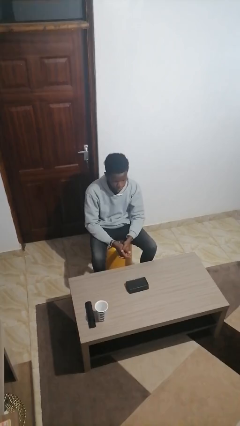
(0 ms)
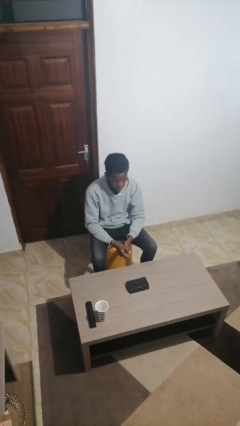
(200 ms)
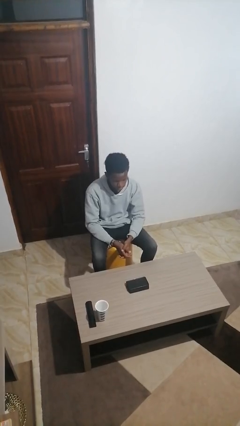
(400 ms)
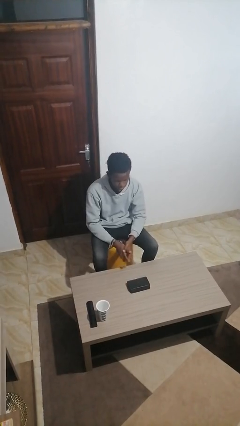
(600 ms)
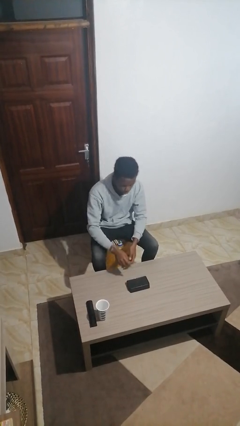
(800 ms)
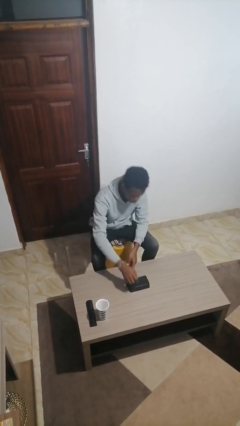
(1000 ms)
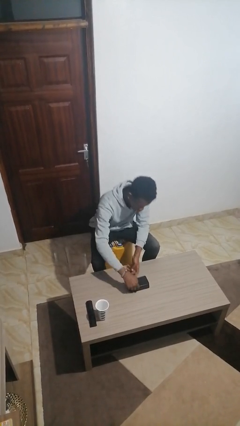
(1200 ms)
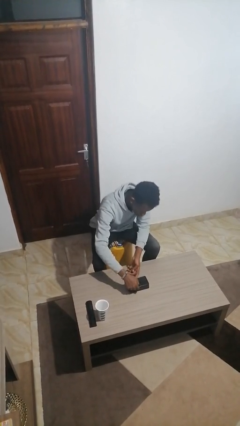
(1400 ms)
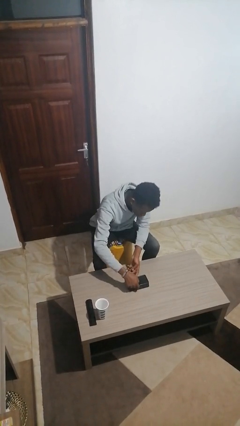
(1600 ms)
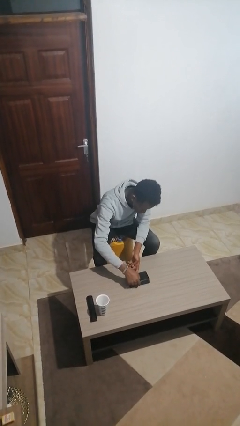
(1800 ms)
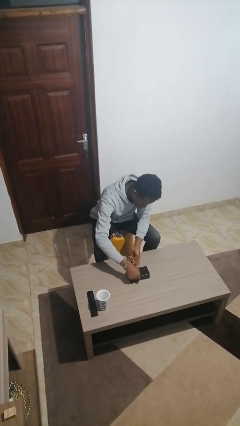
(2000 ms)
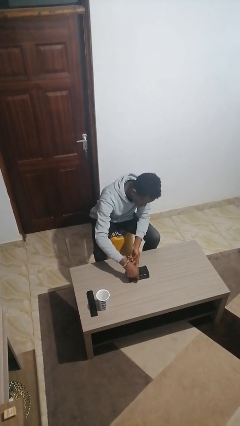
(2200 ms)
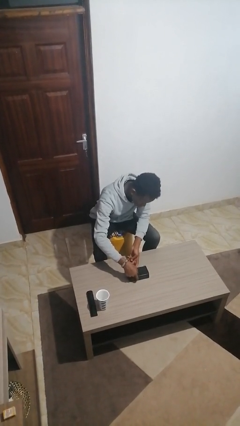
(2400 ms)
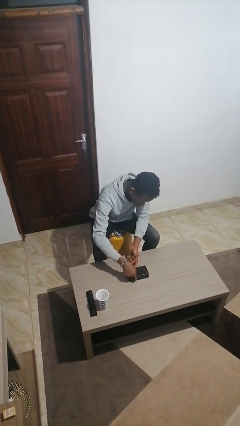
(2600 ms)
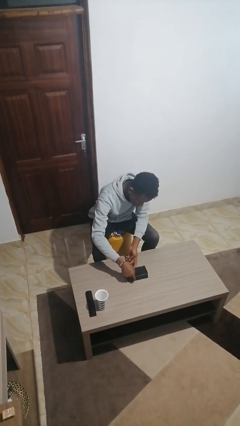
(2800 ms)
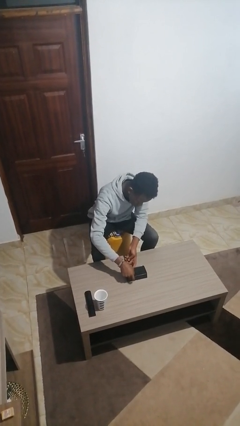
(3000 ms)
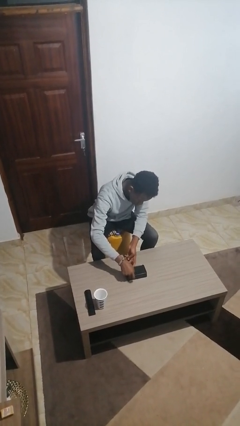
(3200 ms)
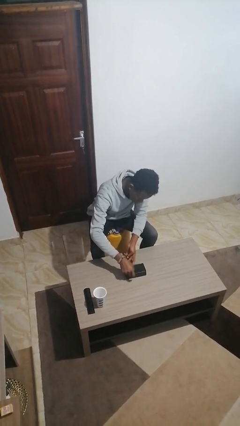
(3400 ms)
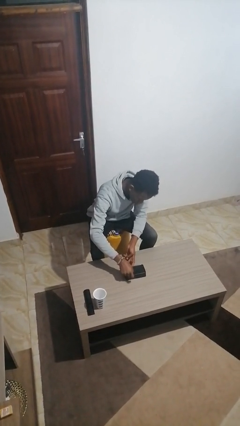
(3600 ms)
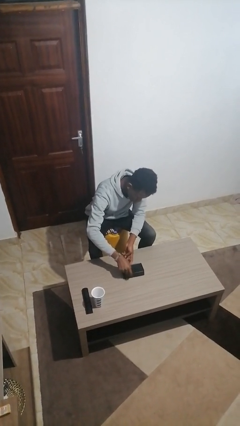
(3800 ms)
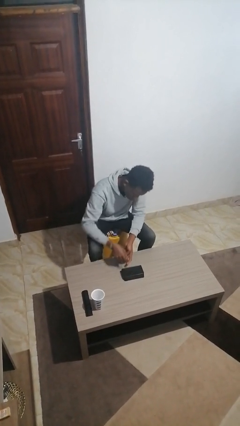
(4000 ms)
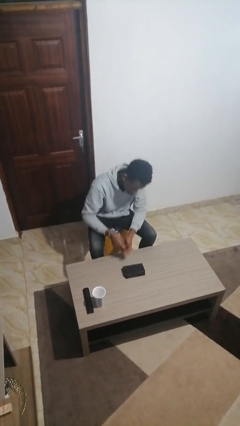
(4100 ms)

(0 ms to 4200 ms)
person taps object with finger

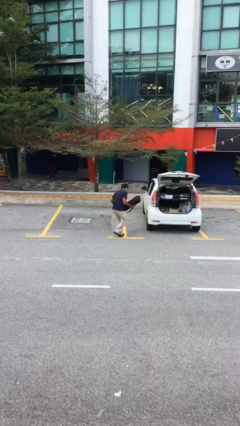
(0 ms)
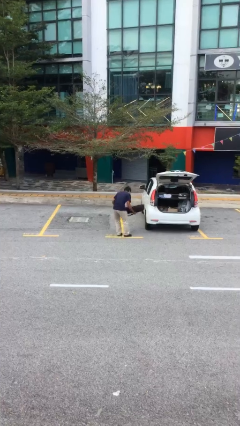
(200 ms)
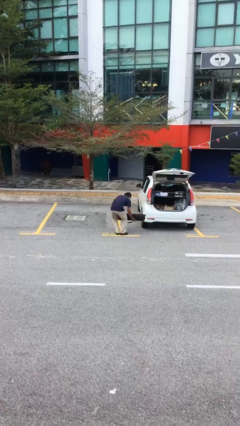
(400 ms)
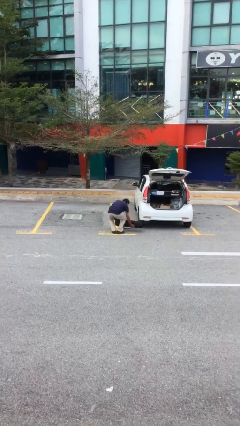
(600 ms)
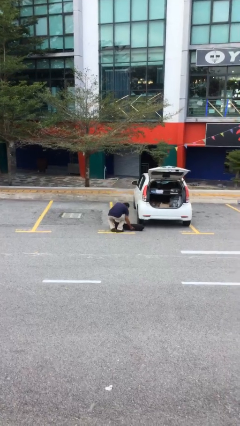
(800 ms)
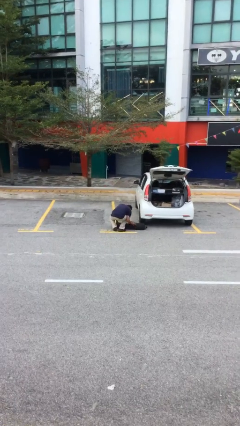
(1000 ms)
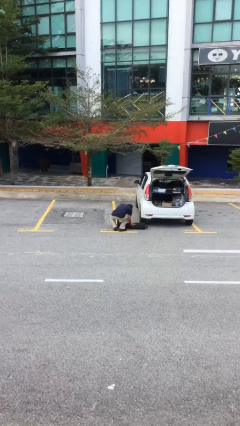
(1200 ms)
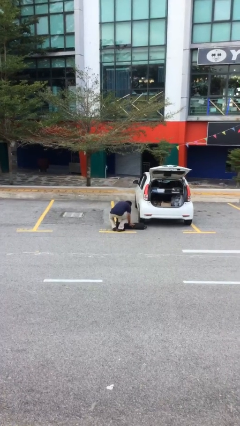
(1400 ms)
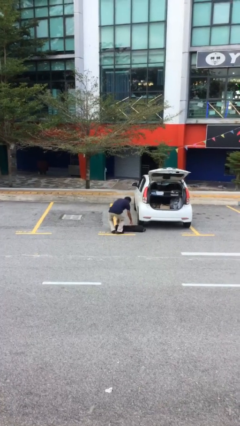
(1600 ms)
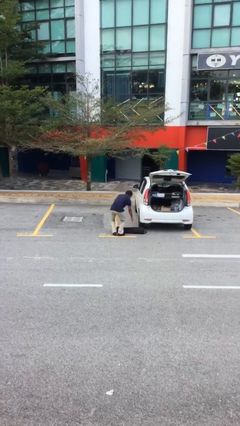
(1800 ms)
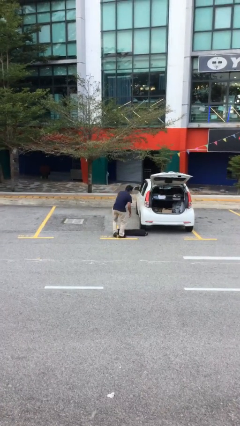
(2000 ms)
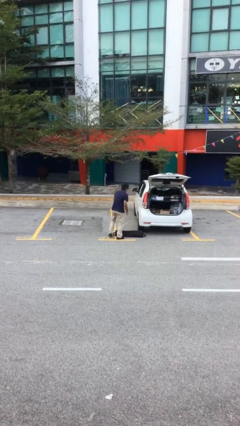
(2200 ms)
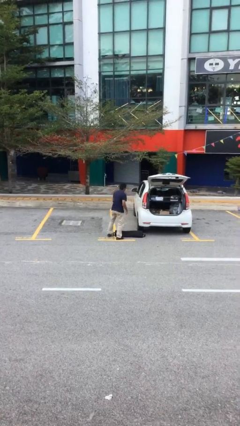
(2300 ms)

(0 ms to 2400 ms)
person puts down object on floor

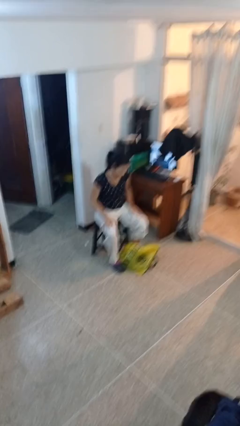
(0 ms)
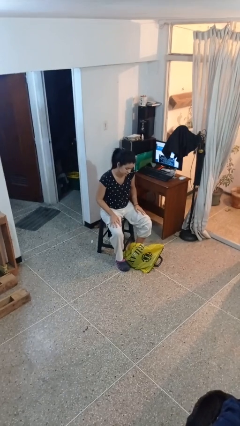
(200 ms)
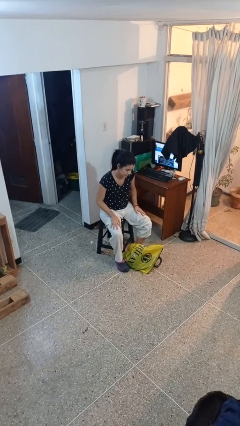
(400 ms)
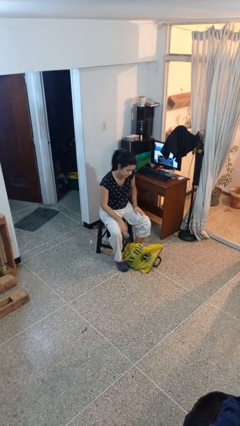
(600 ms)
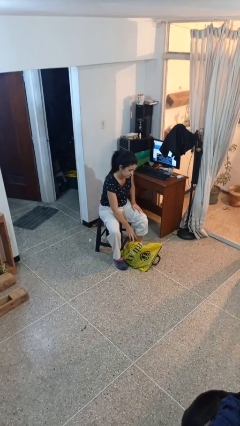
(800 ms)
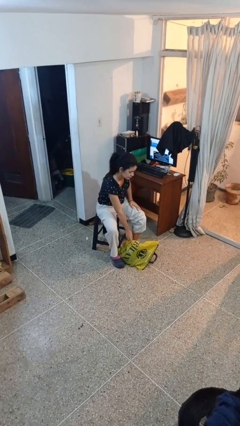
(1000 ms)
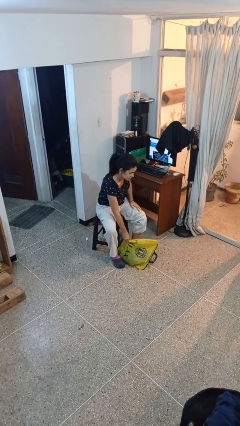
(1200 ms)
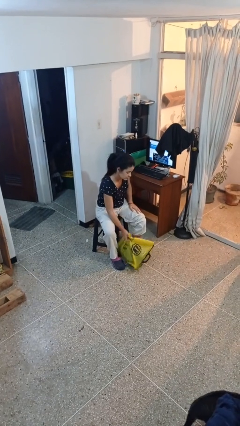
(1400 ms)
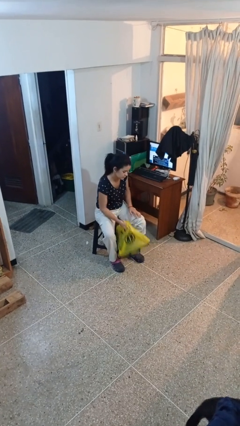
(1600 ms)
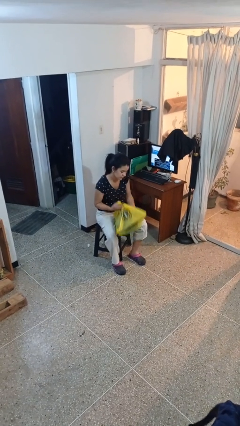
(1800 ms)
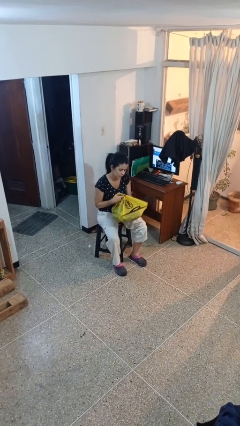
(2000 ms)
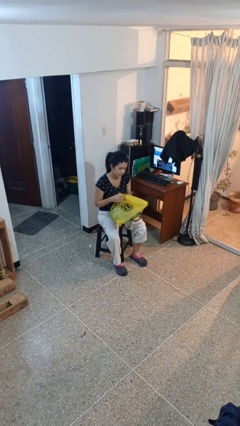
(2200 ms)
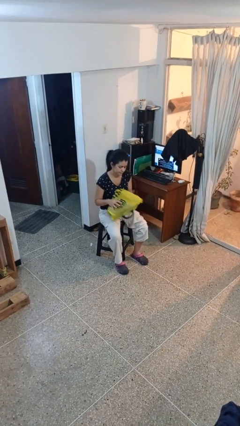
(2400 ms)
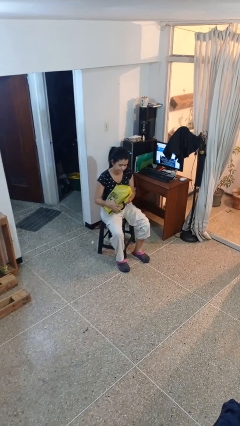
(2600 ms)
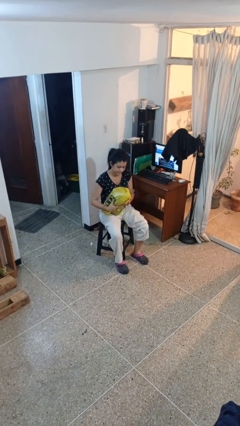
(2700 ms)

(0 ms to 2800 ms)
person picks up object from floor

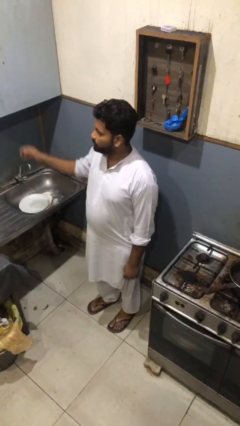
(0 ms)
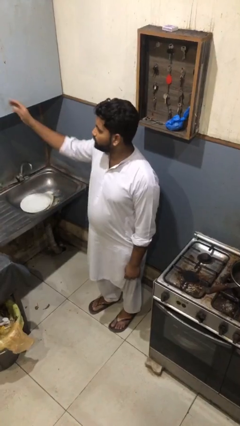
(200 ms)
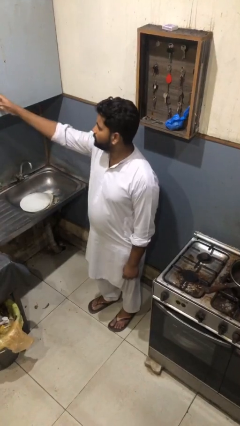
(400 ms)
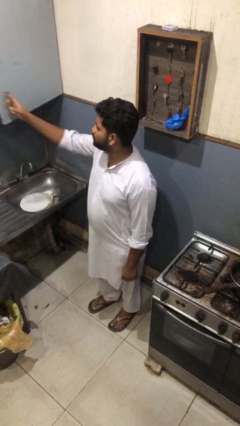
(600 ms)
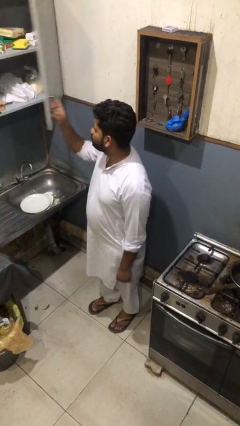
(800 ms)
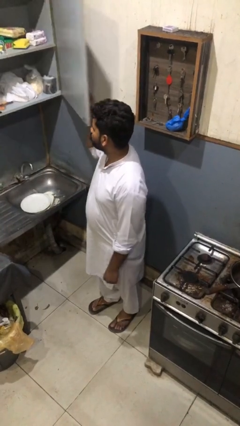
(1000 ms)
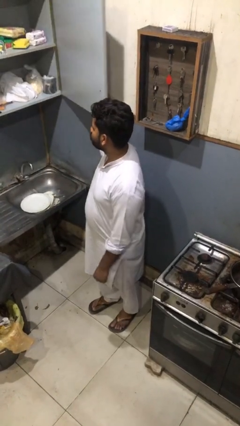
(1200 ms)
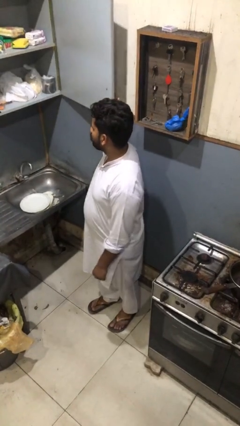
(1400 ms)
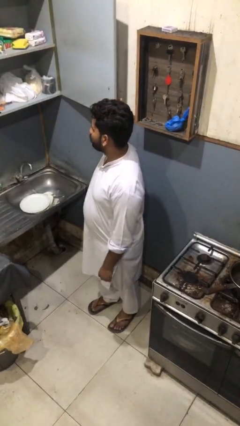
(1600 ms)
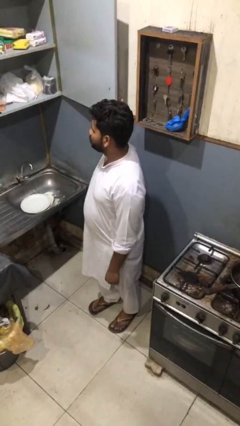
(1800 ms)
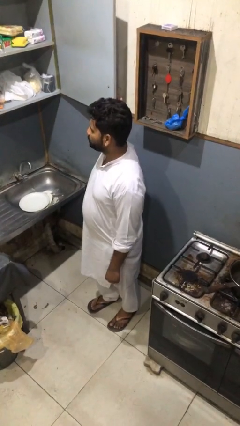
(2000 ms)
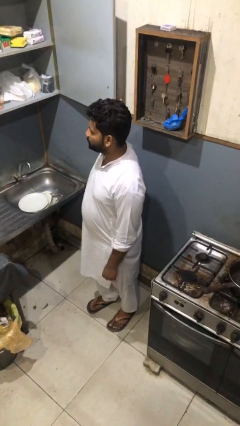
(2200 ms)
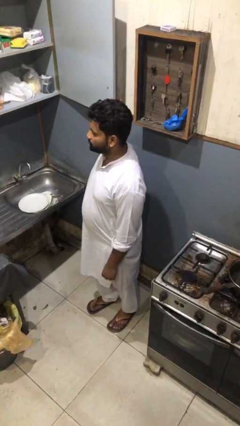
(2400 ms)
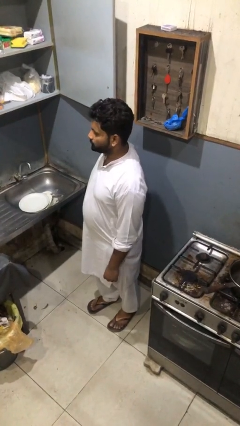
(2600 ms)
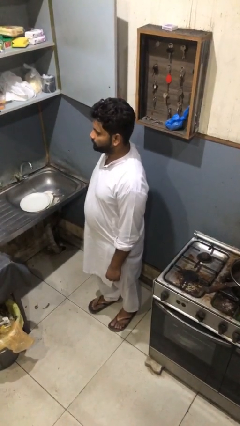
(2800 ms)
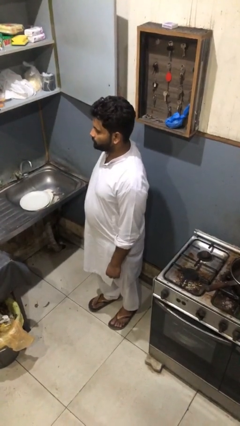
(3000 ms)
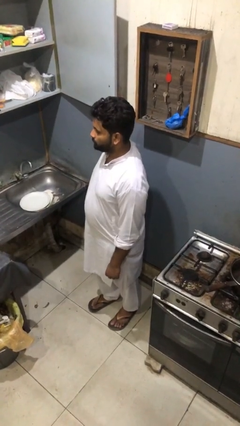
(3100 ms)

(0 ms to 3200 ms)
person opens cabinet

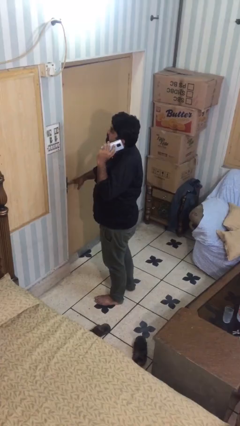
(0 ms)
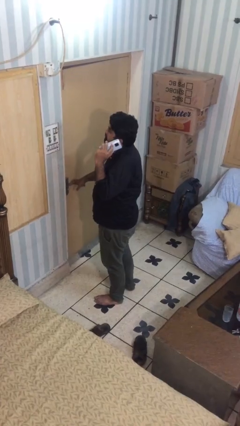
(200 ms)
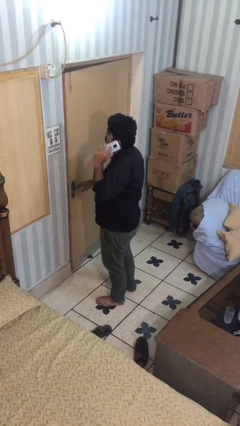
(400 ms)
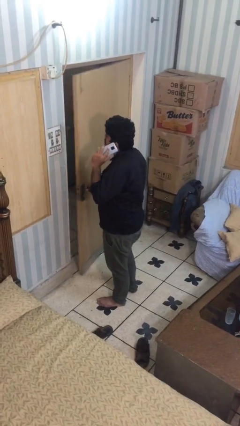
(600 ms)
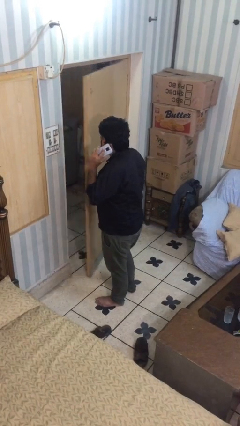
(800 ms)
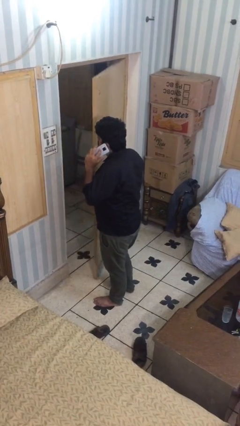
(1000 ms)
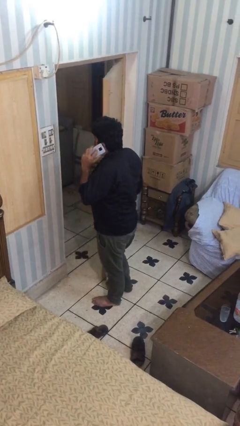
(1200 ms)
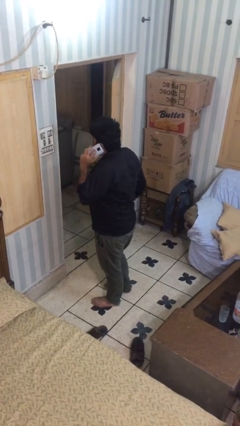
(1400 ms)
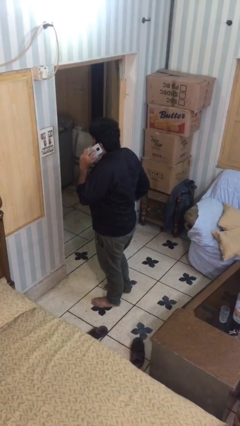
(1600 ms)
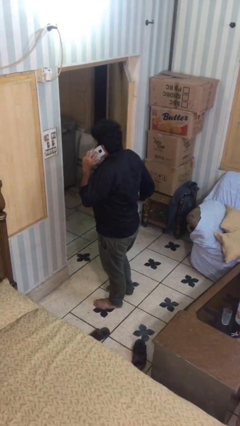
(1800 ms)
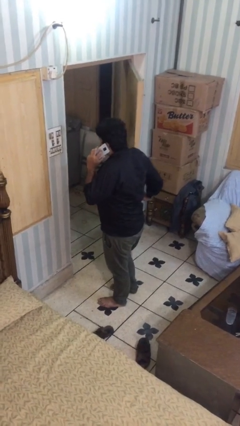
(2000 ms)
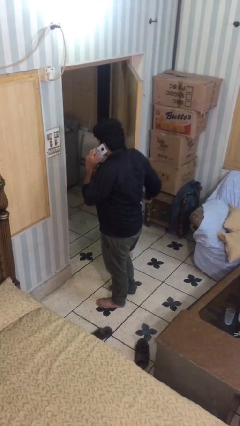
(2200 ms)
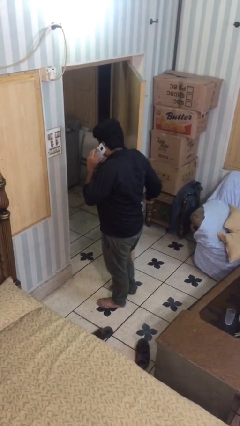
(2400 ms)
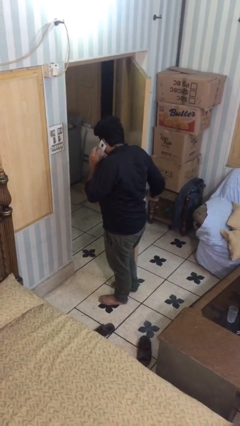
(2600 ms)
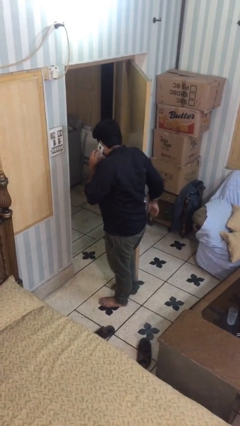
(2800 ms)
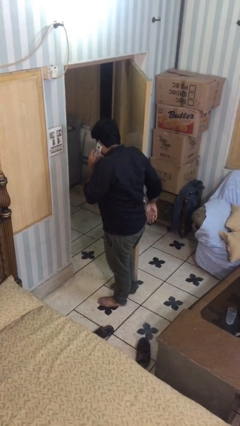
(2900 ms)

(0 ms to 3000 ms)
person opens facility door

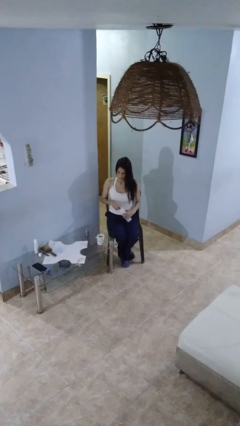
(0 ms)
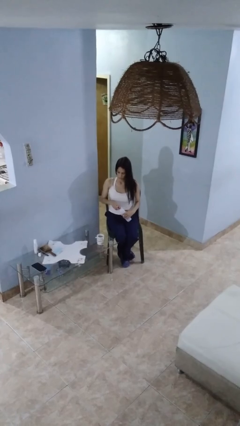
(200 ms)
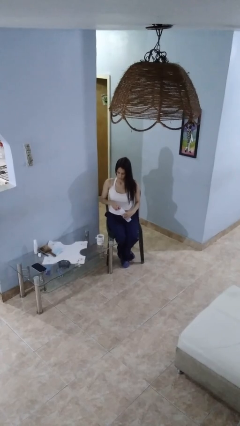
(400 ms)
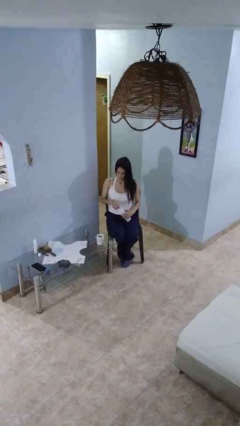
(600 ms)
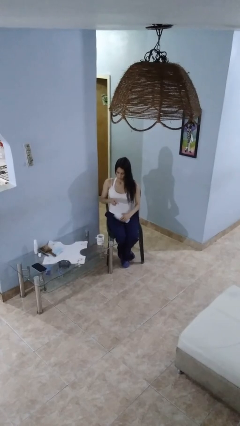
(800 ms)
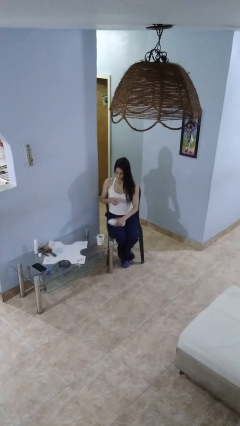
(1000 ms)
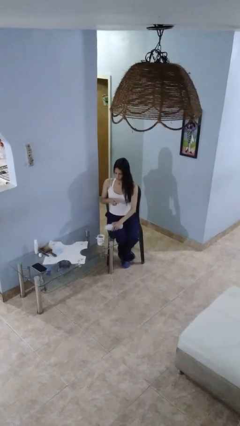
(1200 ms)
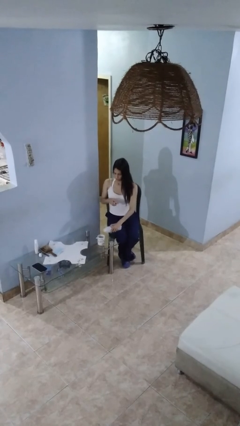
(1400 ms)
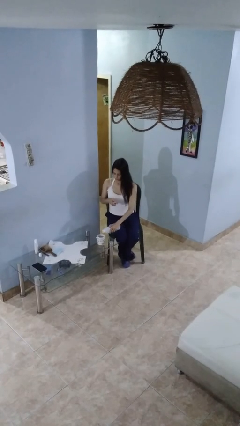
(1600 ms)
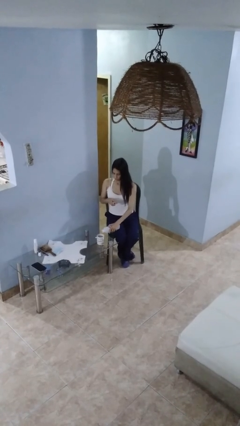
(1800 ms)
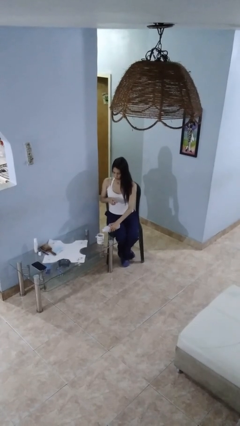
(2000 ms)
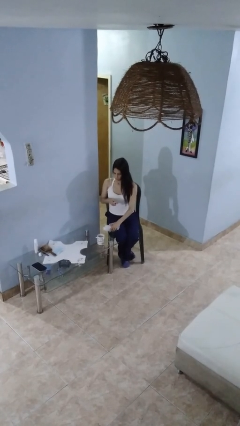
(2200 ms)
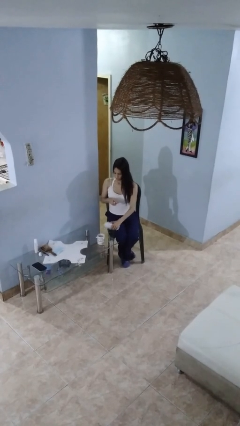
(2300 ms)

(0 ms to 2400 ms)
person pours liquid into cup
